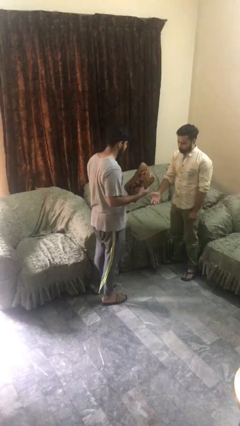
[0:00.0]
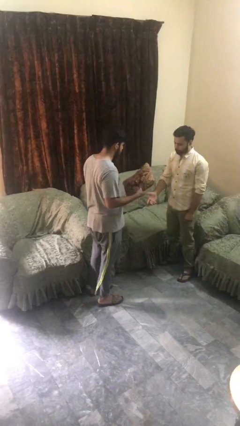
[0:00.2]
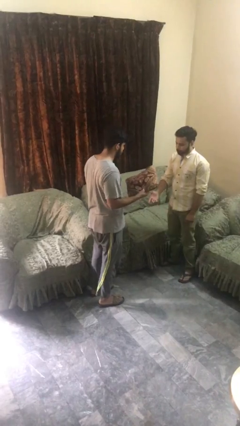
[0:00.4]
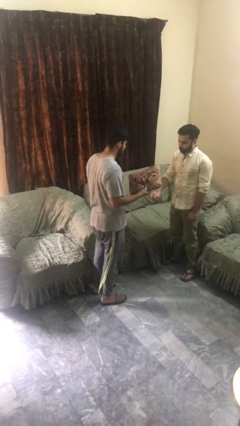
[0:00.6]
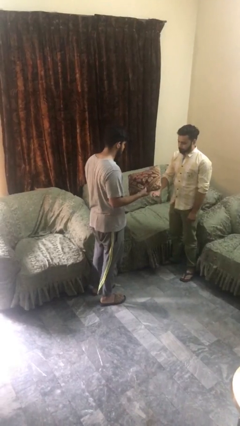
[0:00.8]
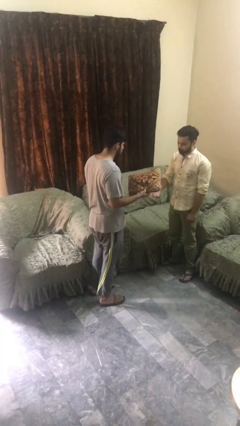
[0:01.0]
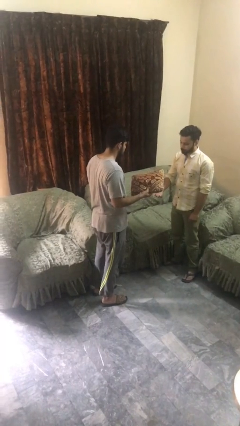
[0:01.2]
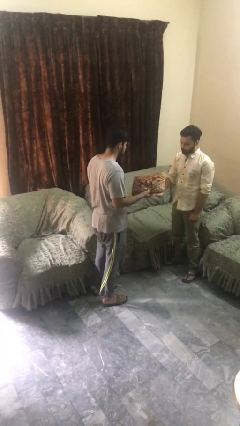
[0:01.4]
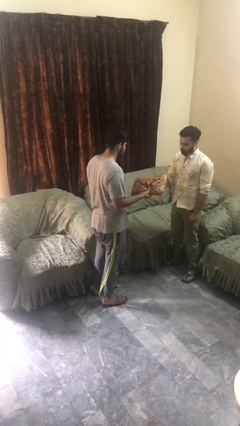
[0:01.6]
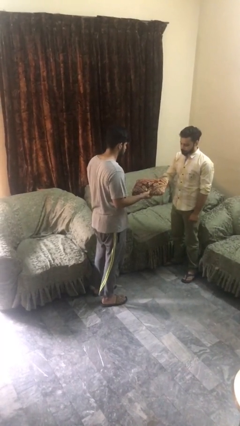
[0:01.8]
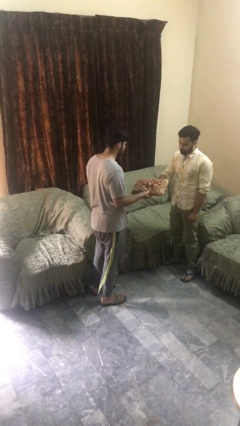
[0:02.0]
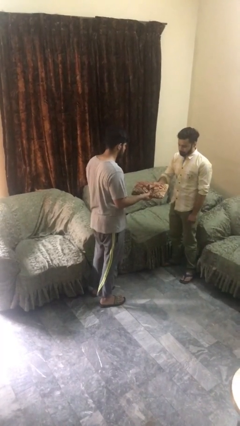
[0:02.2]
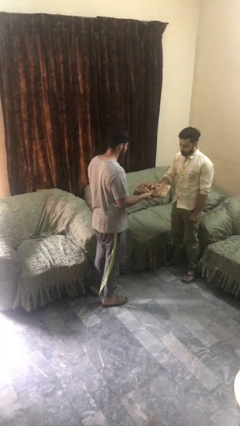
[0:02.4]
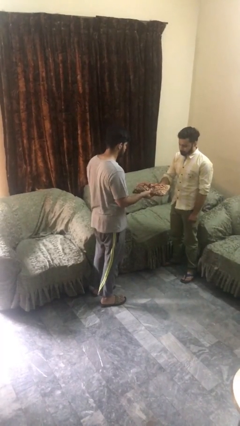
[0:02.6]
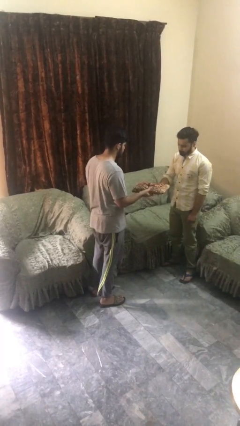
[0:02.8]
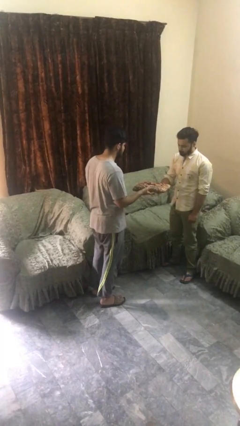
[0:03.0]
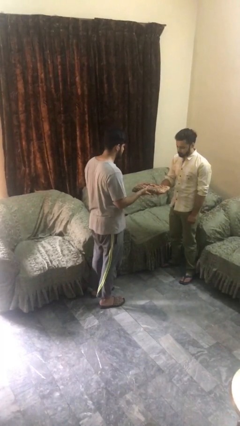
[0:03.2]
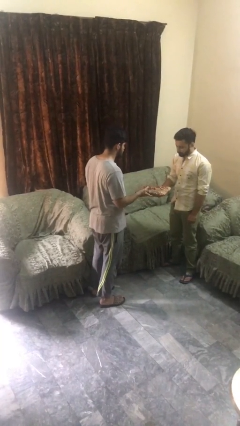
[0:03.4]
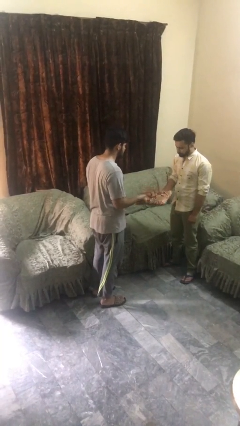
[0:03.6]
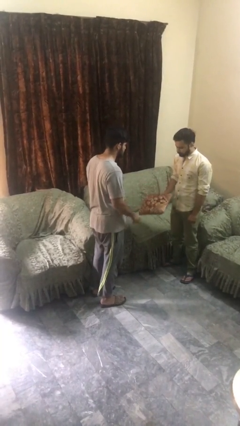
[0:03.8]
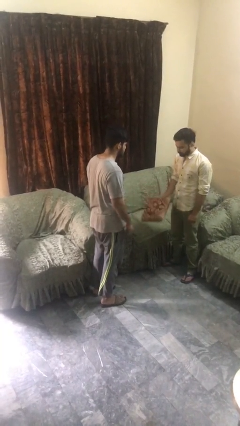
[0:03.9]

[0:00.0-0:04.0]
person transfers object to person

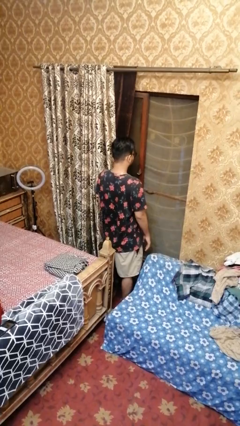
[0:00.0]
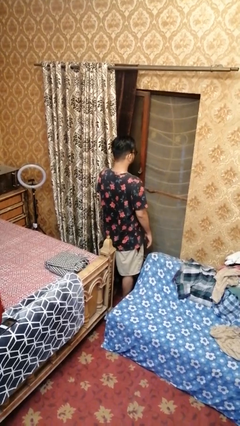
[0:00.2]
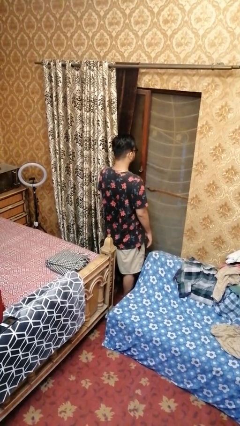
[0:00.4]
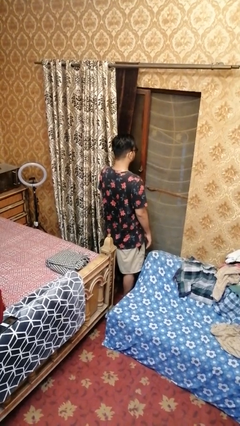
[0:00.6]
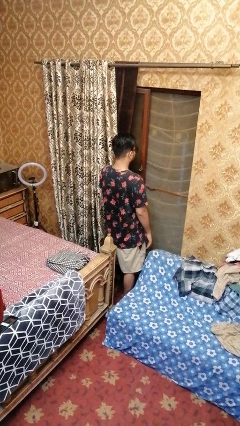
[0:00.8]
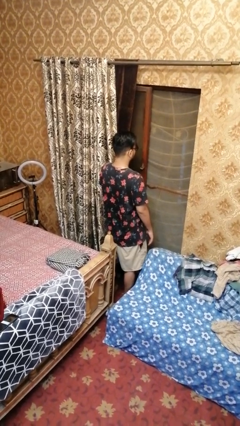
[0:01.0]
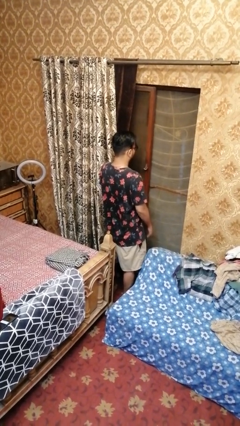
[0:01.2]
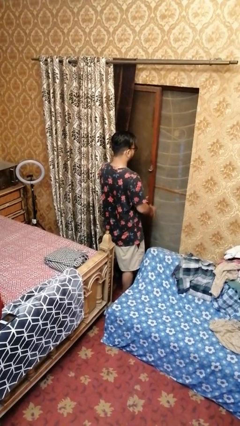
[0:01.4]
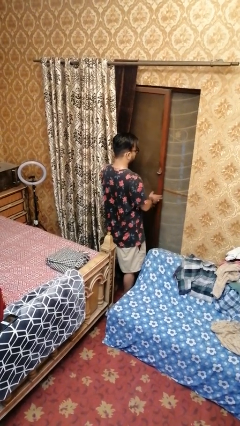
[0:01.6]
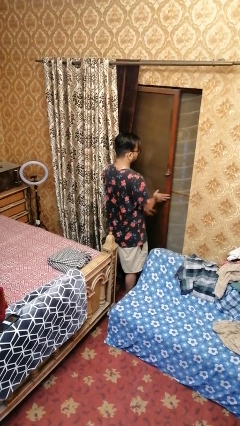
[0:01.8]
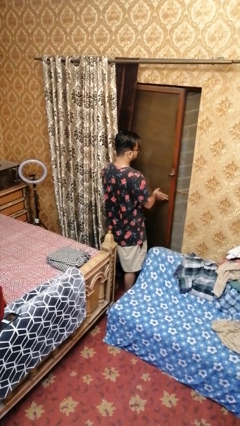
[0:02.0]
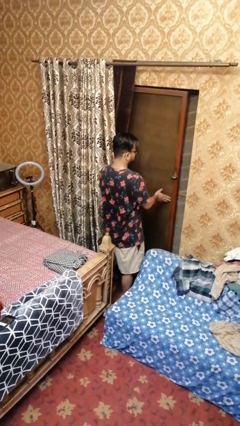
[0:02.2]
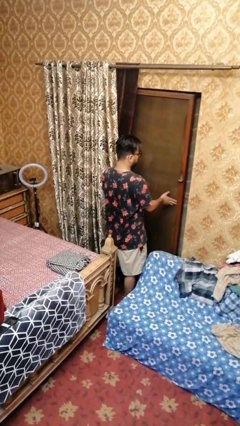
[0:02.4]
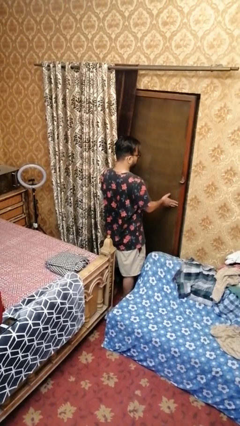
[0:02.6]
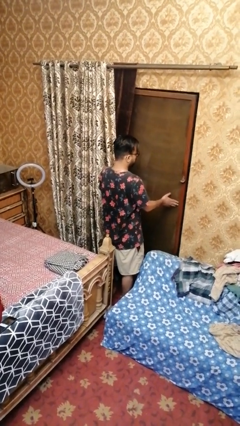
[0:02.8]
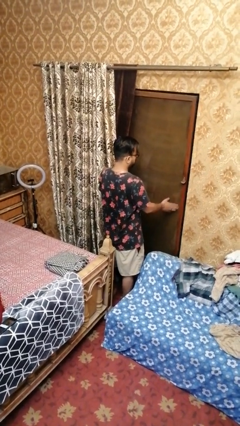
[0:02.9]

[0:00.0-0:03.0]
person closes home window

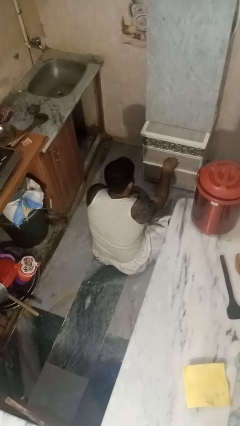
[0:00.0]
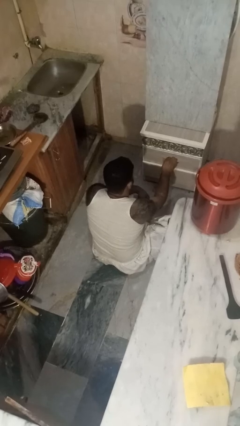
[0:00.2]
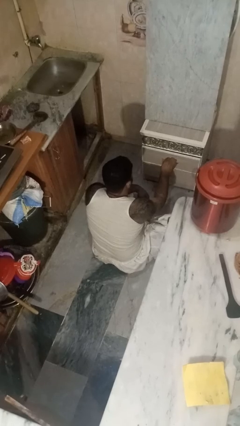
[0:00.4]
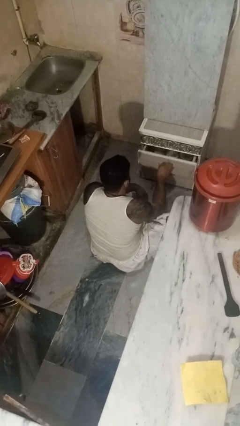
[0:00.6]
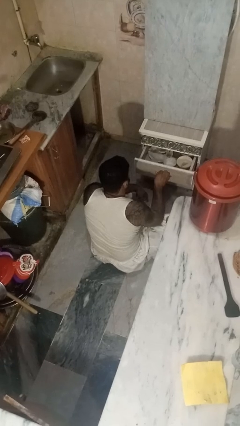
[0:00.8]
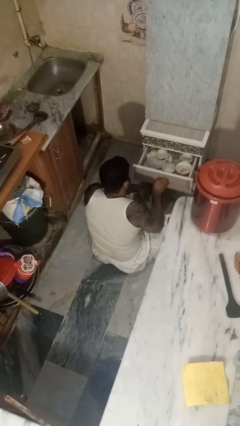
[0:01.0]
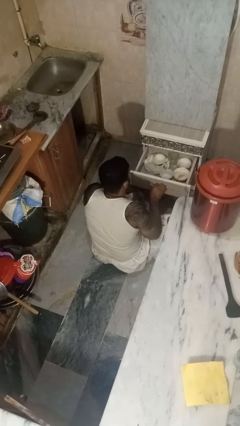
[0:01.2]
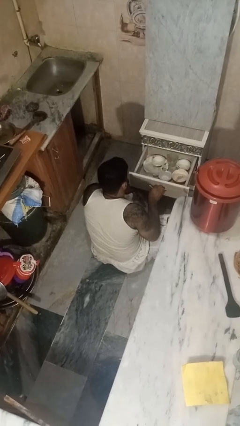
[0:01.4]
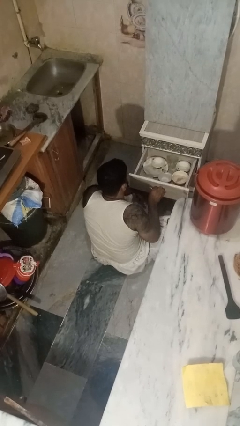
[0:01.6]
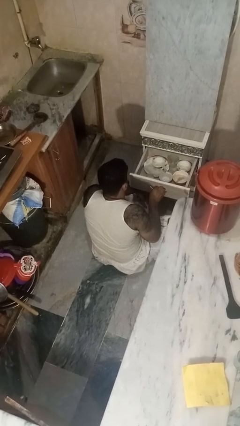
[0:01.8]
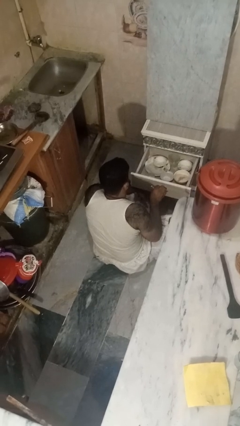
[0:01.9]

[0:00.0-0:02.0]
person opens kitchen drawer

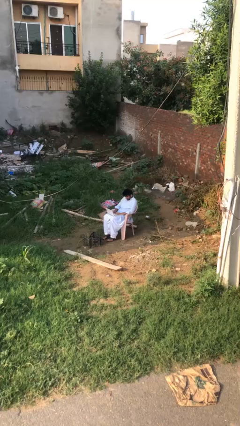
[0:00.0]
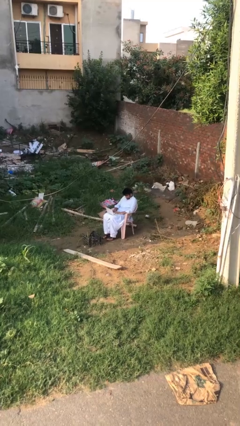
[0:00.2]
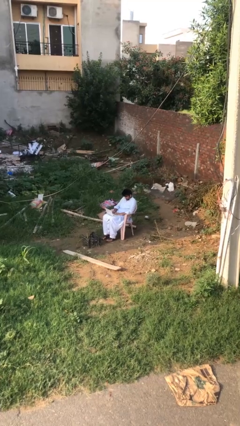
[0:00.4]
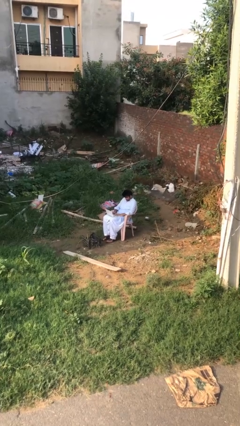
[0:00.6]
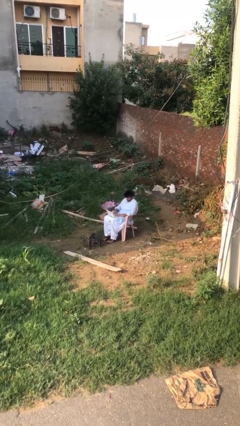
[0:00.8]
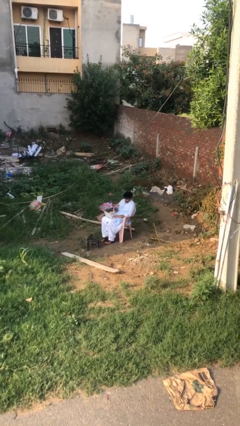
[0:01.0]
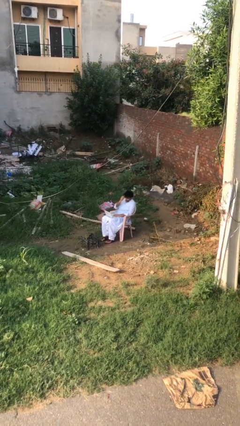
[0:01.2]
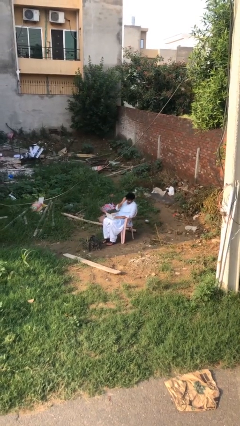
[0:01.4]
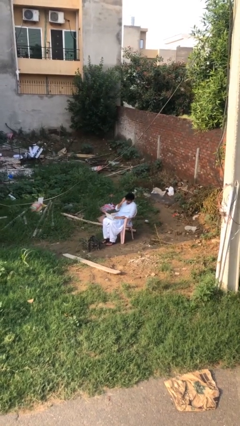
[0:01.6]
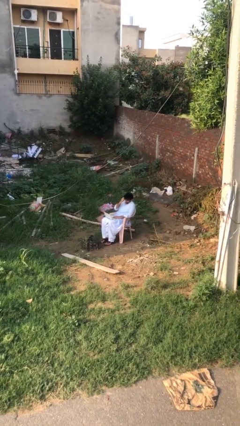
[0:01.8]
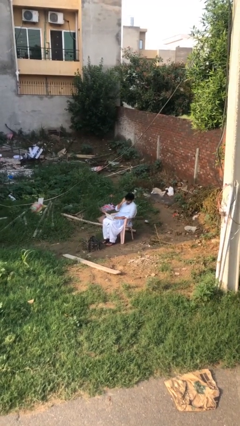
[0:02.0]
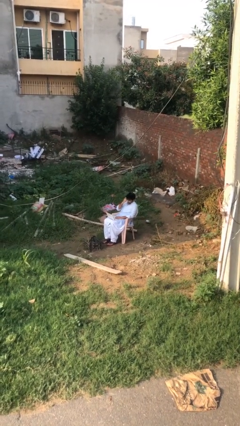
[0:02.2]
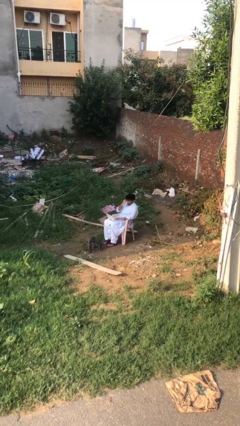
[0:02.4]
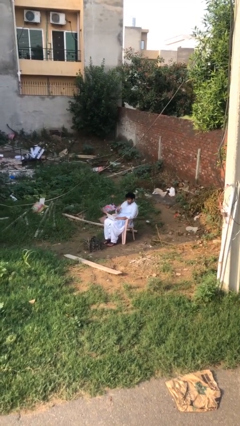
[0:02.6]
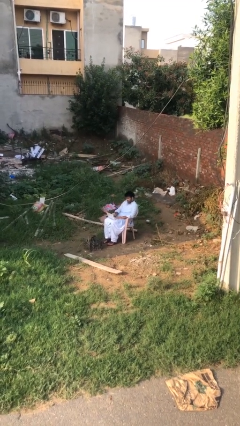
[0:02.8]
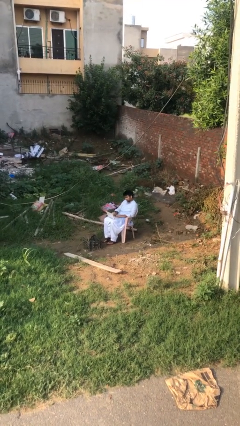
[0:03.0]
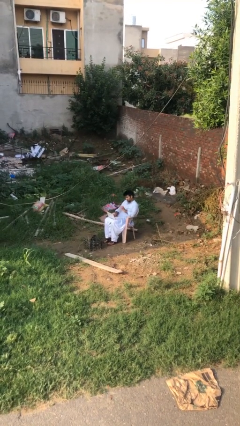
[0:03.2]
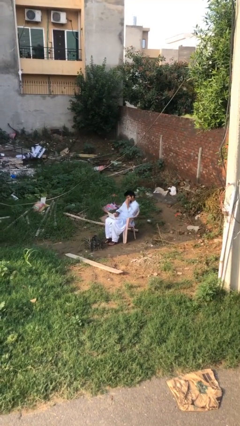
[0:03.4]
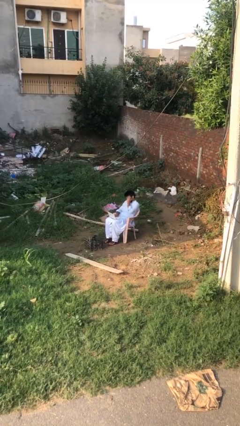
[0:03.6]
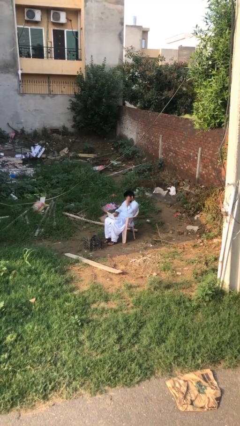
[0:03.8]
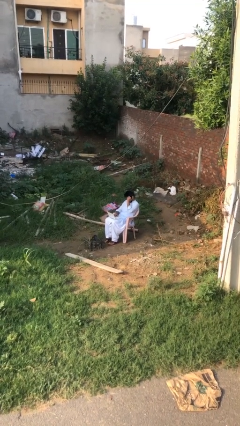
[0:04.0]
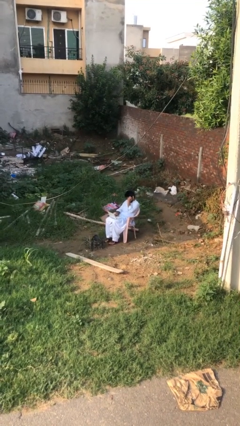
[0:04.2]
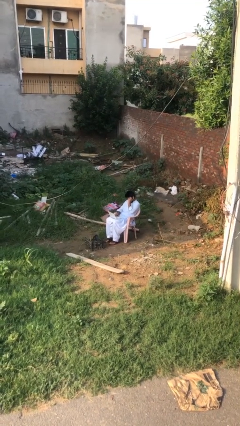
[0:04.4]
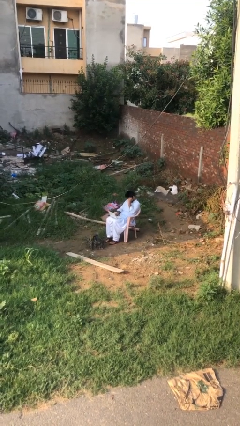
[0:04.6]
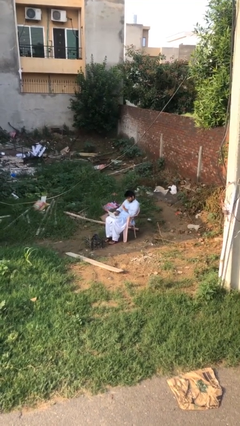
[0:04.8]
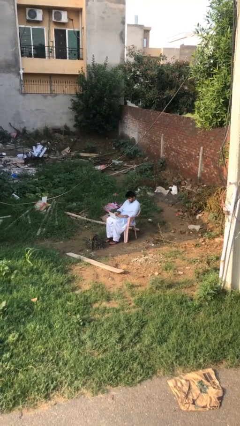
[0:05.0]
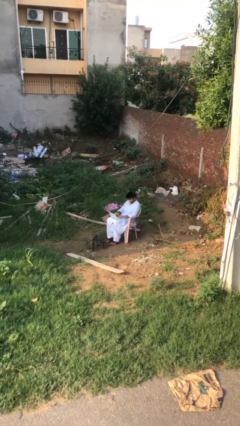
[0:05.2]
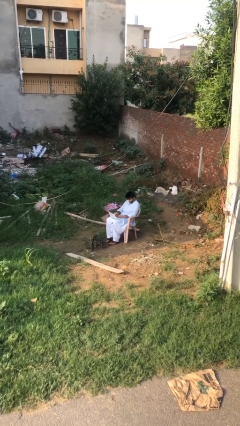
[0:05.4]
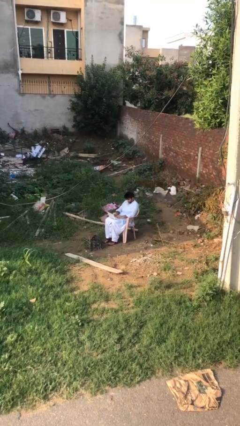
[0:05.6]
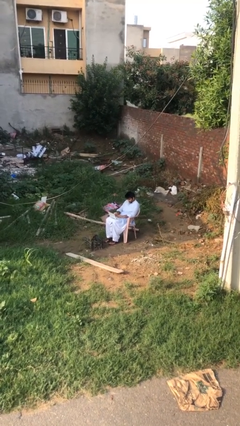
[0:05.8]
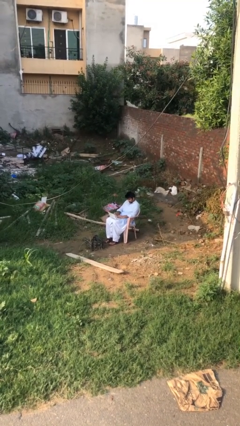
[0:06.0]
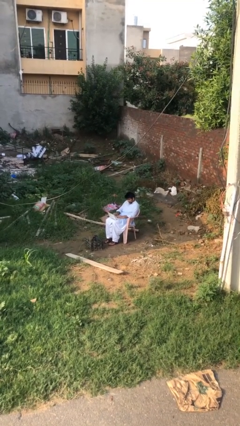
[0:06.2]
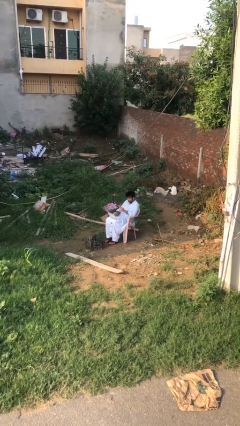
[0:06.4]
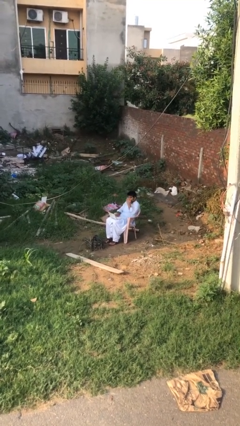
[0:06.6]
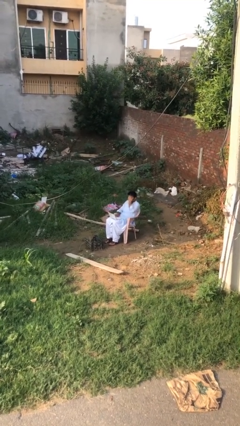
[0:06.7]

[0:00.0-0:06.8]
person interacts with laptop

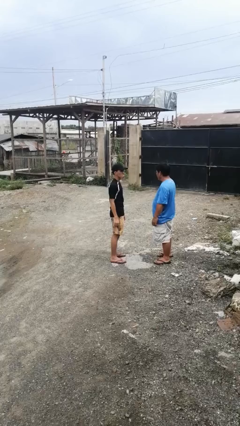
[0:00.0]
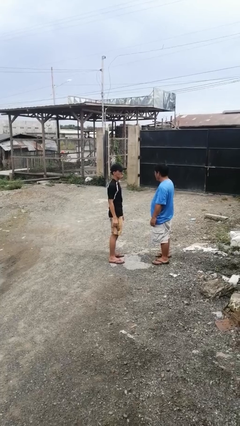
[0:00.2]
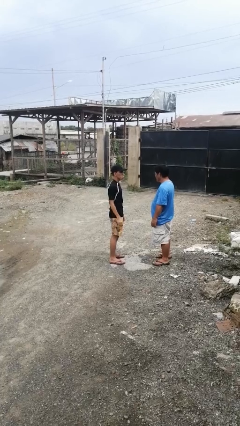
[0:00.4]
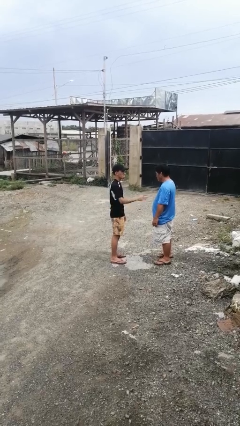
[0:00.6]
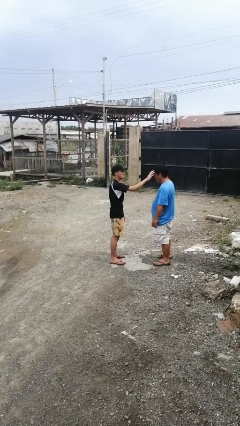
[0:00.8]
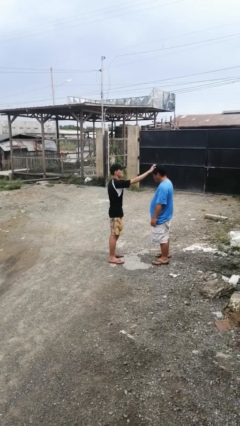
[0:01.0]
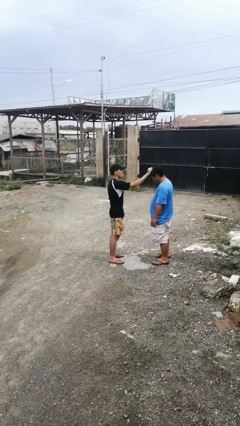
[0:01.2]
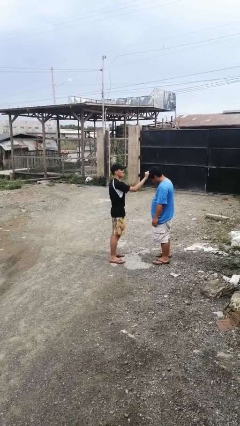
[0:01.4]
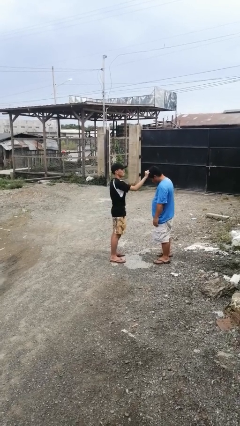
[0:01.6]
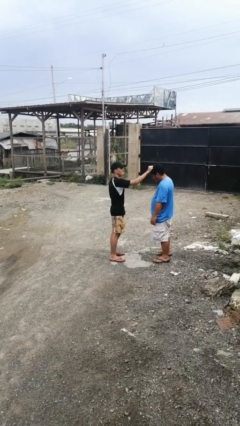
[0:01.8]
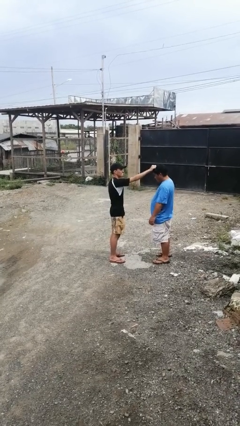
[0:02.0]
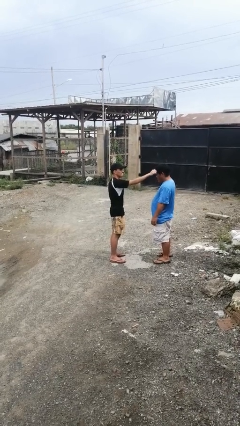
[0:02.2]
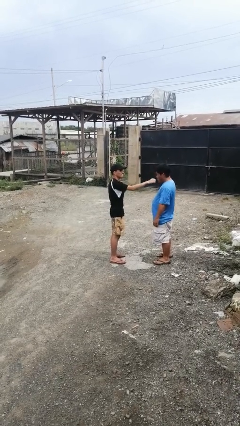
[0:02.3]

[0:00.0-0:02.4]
person grabs person by hair
